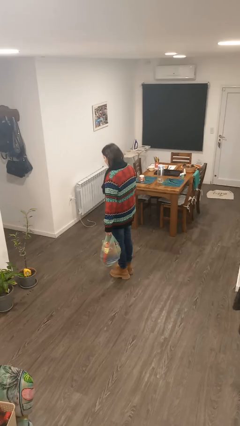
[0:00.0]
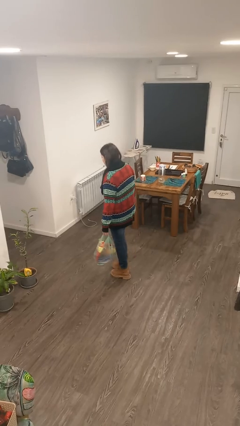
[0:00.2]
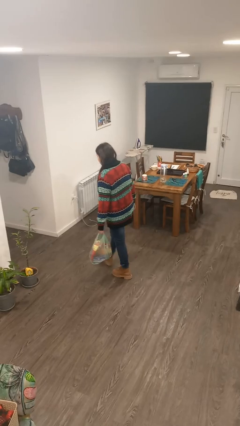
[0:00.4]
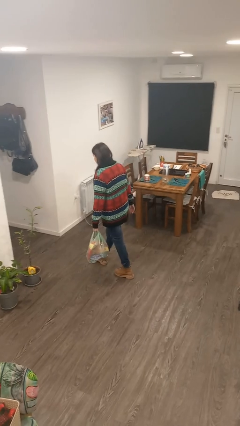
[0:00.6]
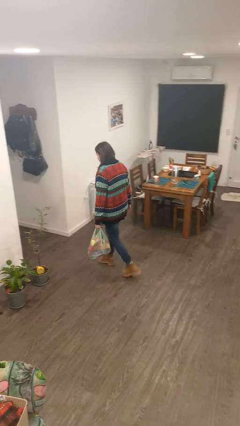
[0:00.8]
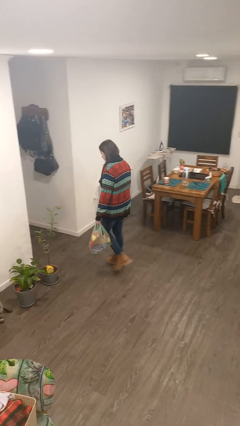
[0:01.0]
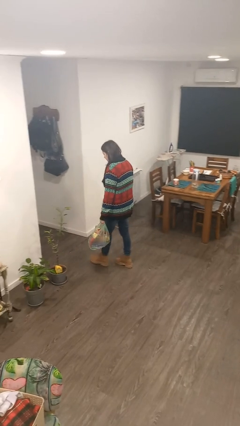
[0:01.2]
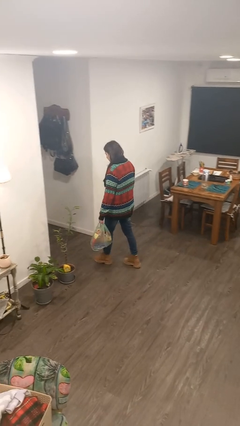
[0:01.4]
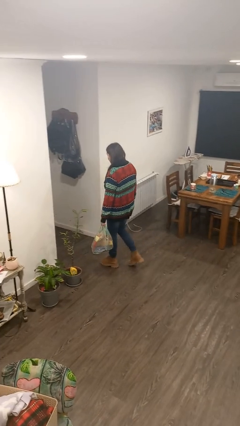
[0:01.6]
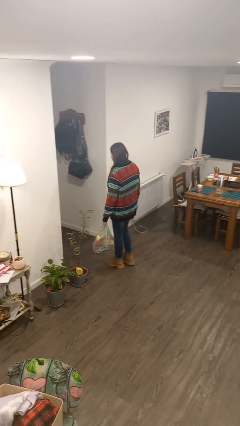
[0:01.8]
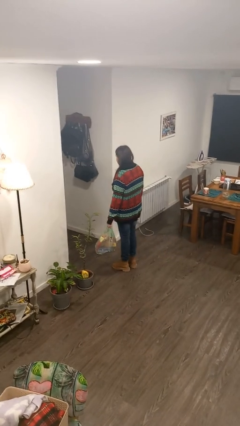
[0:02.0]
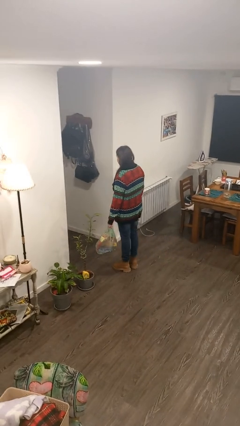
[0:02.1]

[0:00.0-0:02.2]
person carries groceries

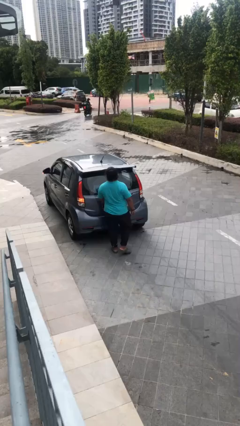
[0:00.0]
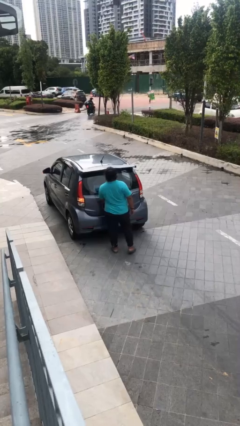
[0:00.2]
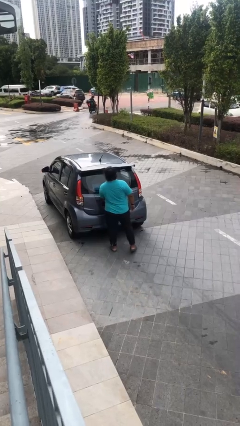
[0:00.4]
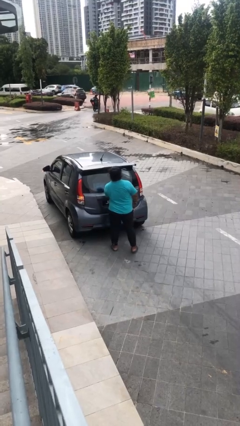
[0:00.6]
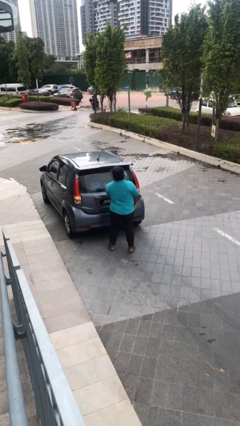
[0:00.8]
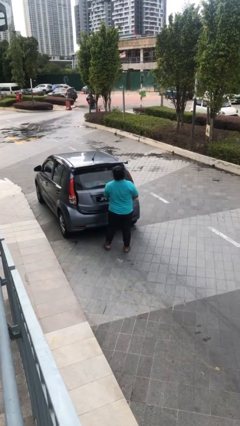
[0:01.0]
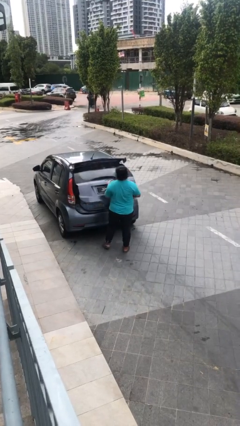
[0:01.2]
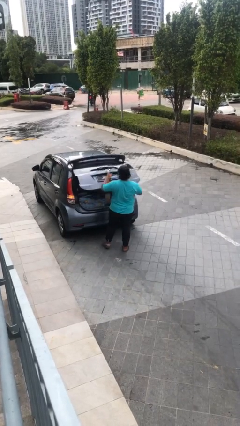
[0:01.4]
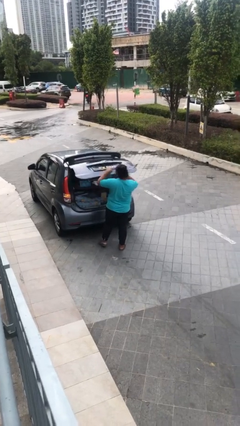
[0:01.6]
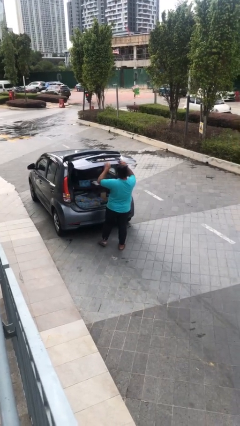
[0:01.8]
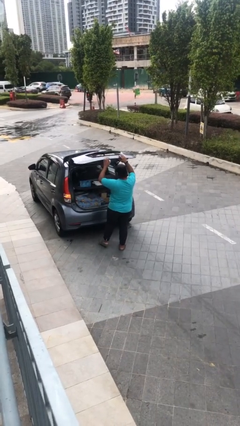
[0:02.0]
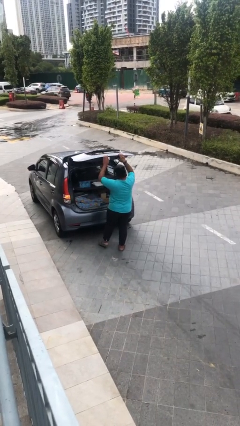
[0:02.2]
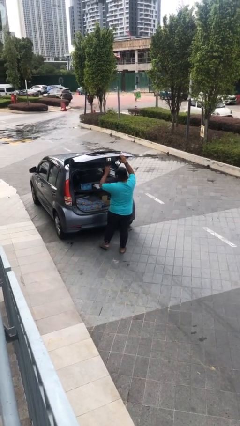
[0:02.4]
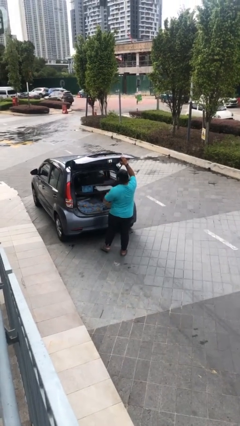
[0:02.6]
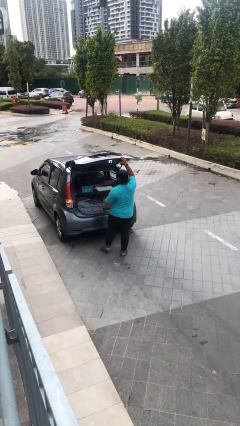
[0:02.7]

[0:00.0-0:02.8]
person opens car trunk

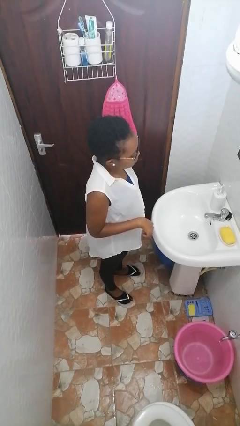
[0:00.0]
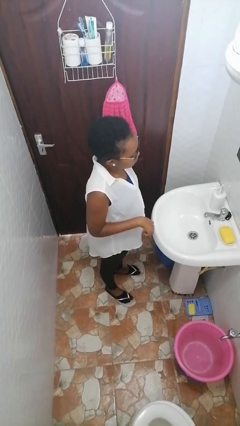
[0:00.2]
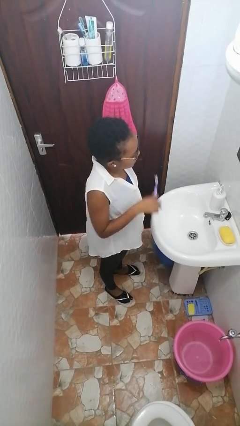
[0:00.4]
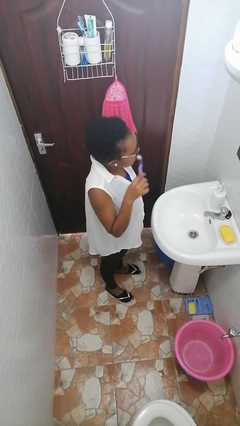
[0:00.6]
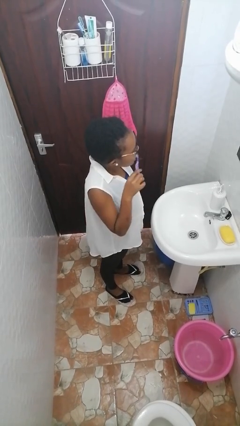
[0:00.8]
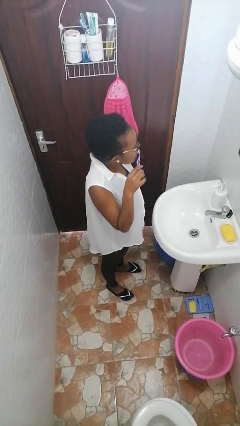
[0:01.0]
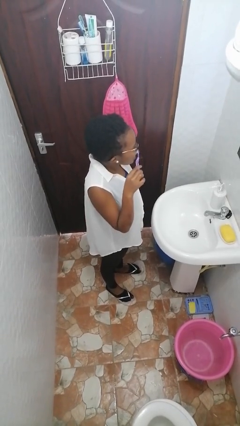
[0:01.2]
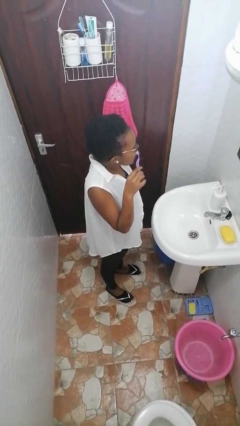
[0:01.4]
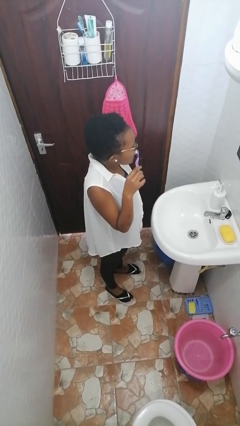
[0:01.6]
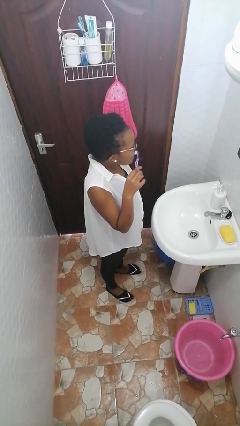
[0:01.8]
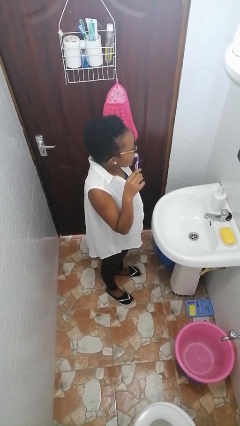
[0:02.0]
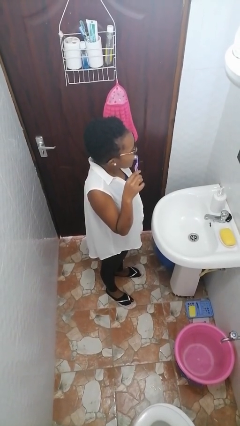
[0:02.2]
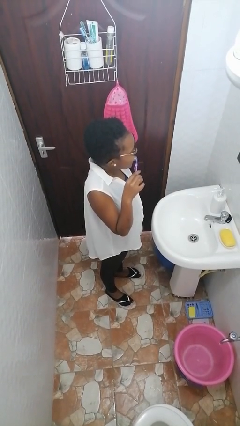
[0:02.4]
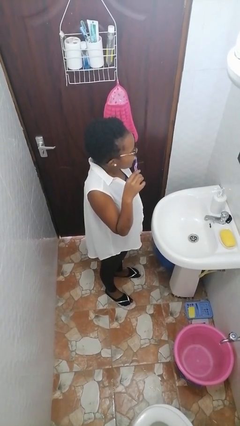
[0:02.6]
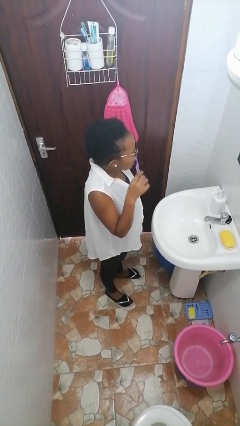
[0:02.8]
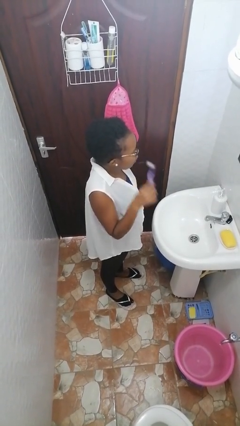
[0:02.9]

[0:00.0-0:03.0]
person brushes teeth

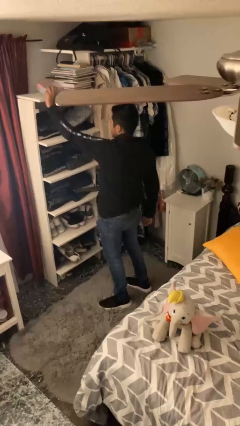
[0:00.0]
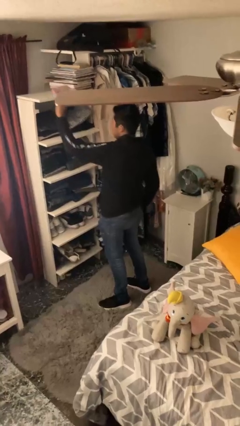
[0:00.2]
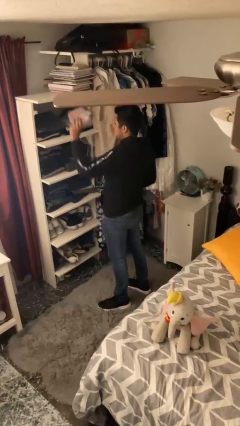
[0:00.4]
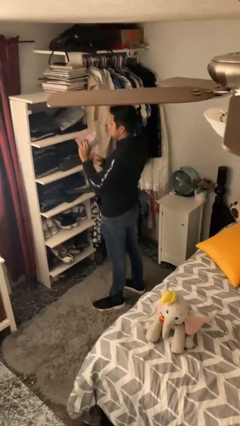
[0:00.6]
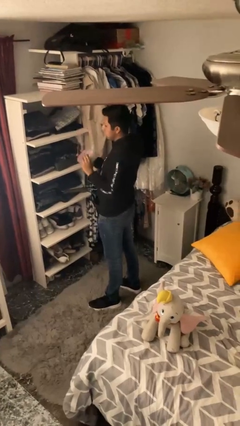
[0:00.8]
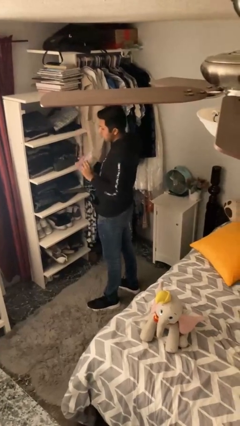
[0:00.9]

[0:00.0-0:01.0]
person picks up object from shelf

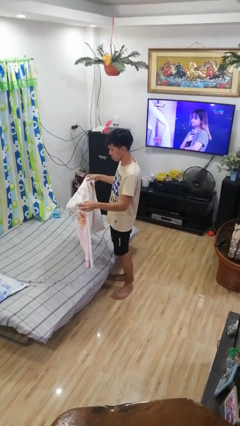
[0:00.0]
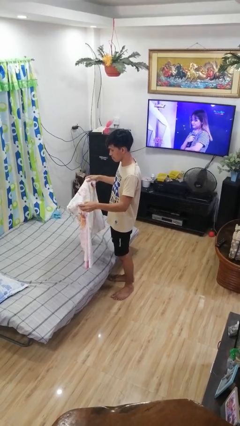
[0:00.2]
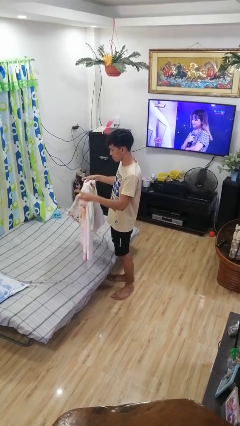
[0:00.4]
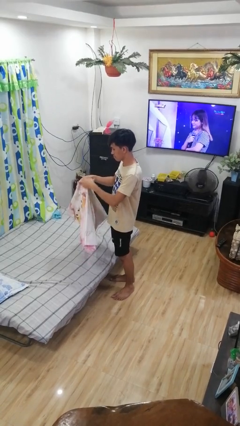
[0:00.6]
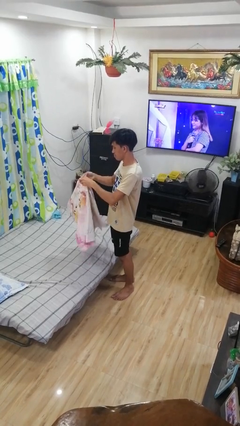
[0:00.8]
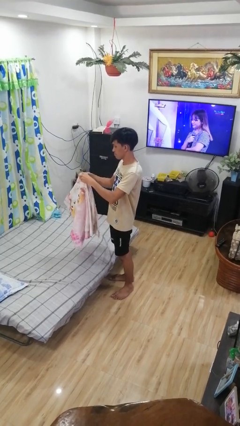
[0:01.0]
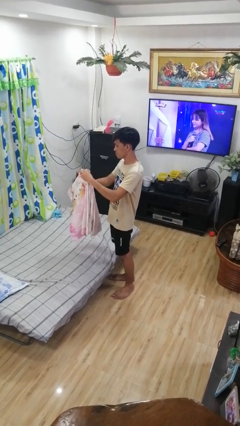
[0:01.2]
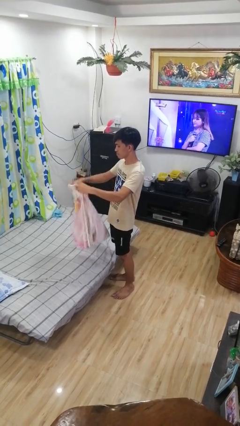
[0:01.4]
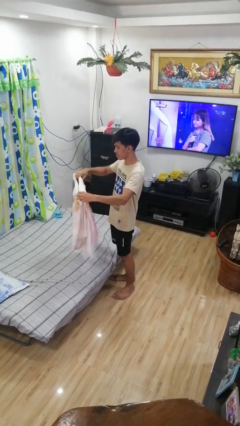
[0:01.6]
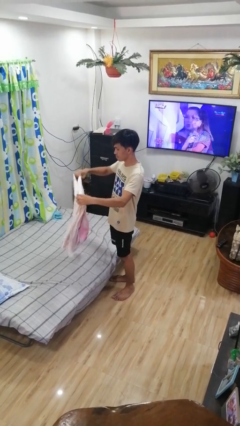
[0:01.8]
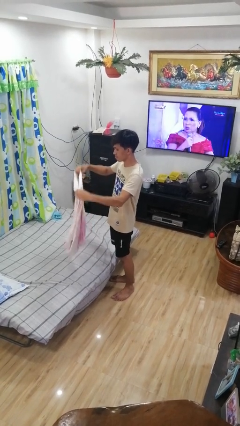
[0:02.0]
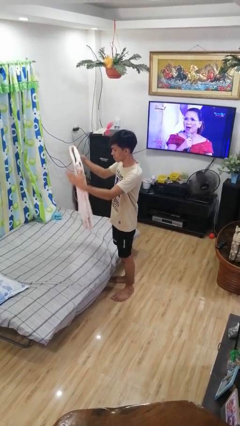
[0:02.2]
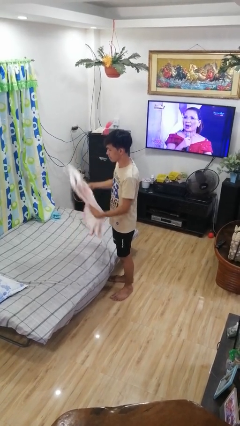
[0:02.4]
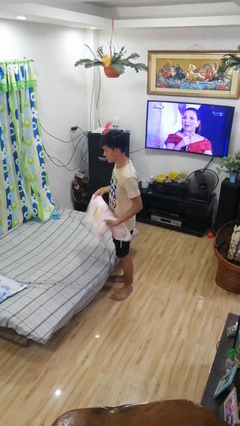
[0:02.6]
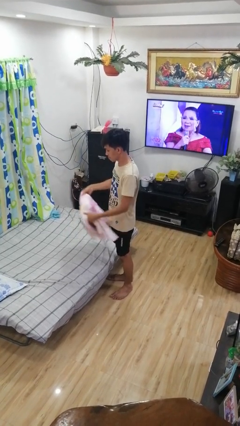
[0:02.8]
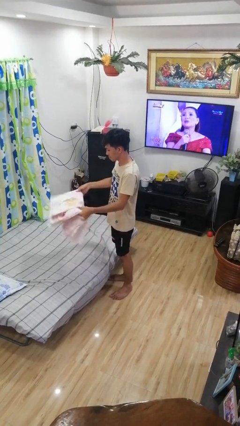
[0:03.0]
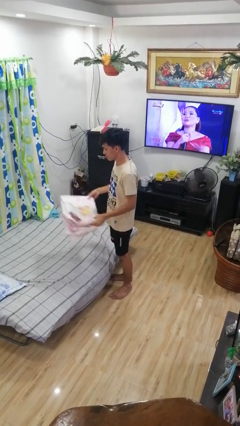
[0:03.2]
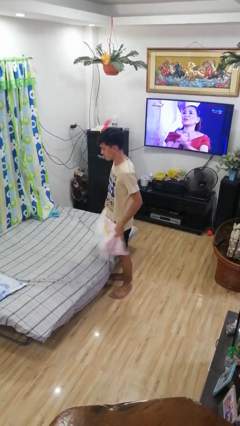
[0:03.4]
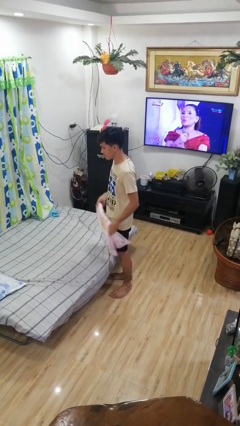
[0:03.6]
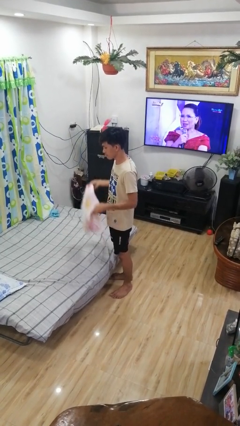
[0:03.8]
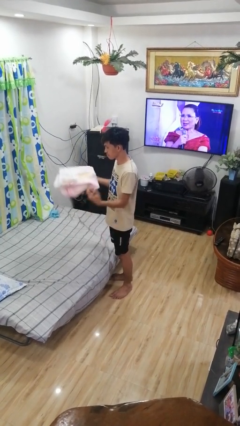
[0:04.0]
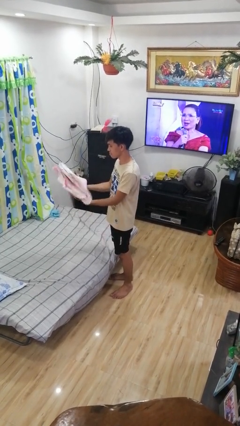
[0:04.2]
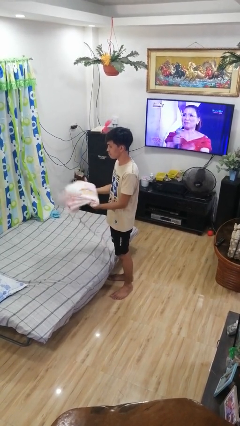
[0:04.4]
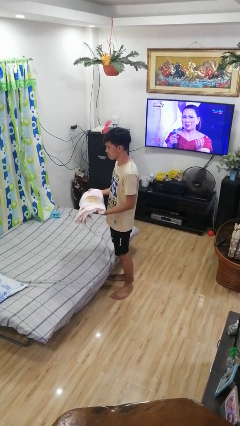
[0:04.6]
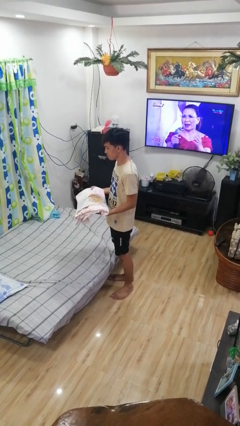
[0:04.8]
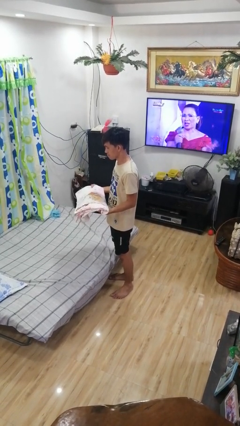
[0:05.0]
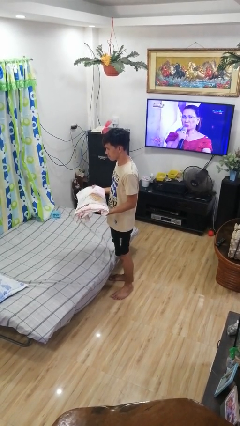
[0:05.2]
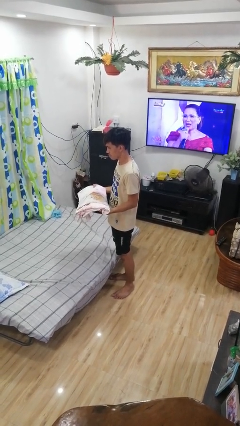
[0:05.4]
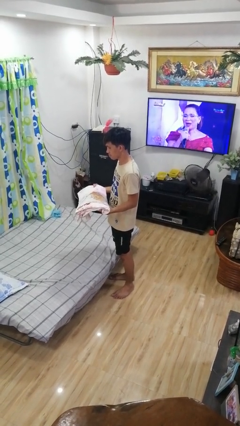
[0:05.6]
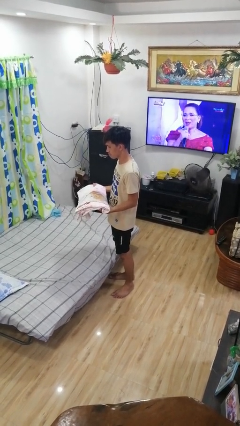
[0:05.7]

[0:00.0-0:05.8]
person folds blanket

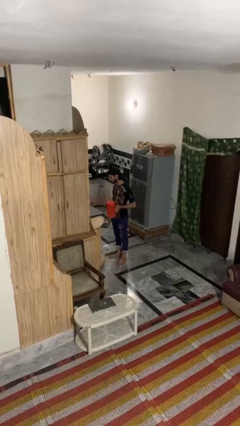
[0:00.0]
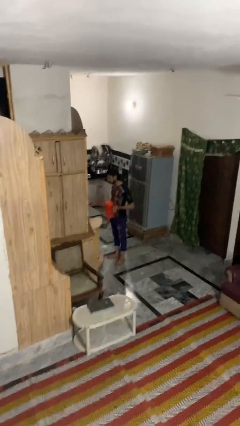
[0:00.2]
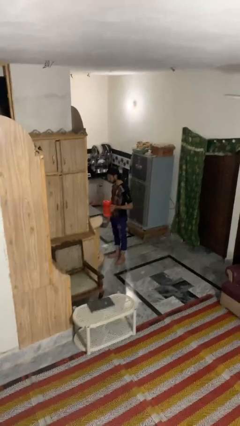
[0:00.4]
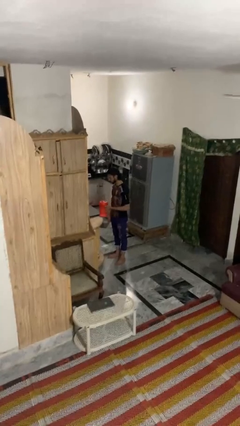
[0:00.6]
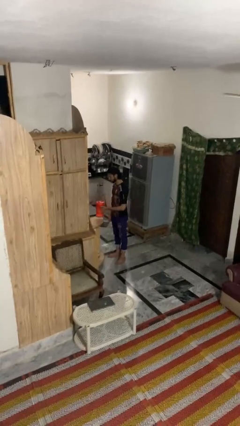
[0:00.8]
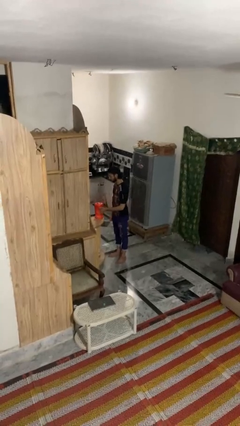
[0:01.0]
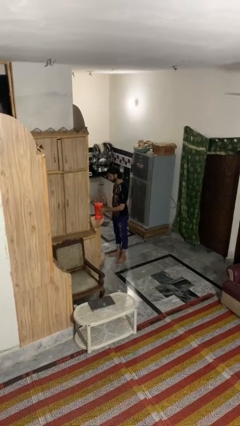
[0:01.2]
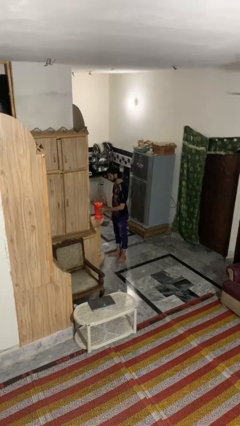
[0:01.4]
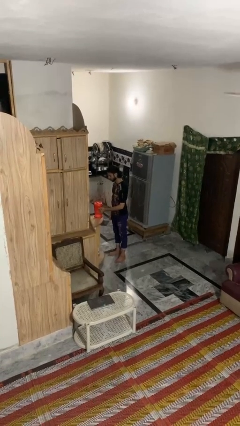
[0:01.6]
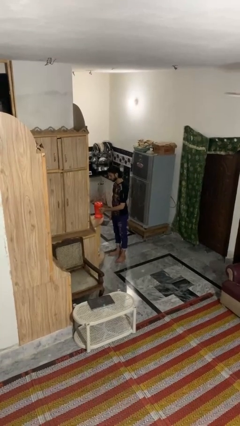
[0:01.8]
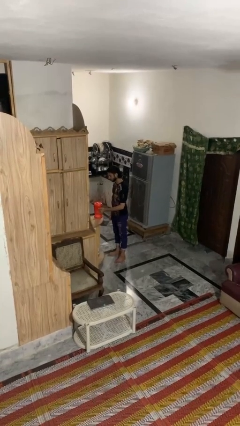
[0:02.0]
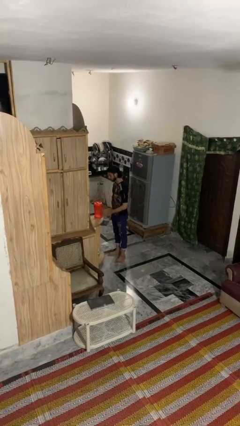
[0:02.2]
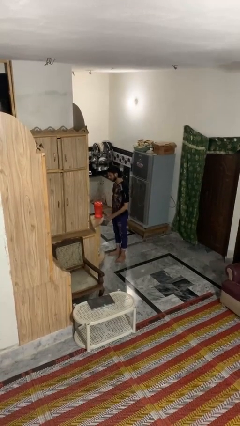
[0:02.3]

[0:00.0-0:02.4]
person puts down object on countertop

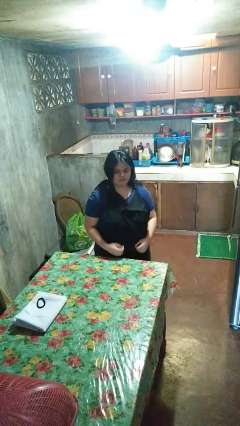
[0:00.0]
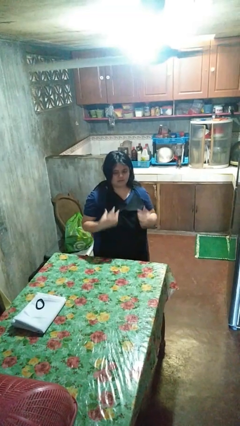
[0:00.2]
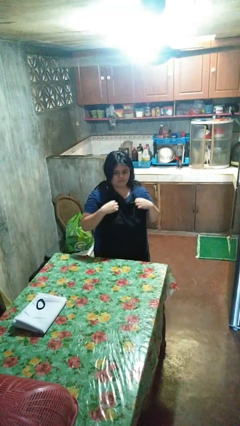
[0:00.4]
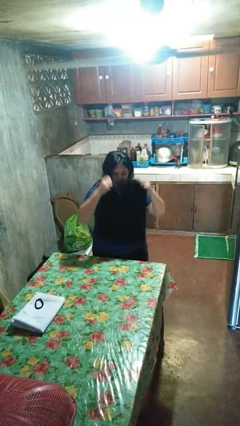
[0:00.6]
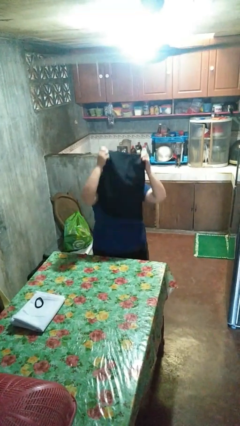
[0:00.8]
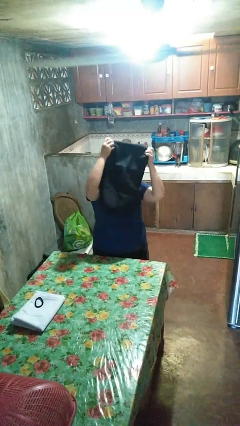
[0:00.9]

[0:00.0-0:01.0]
person takes off apron
